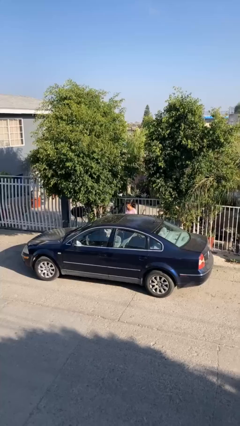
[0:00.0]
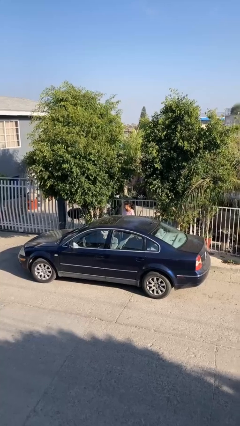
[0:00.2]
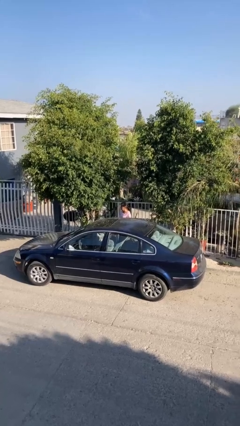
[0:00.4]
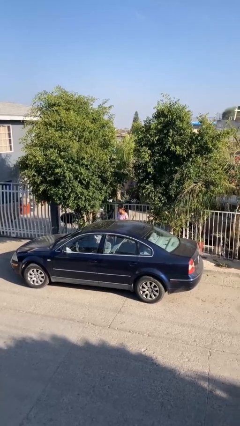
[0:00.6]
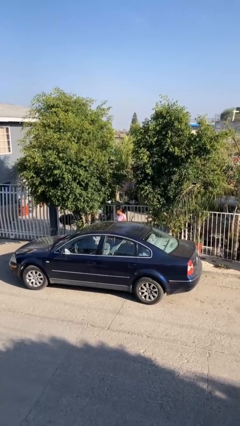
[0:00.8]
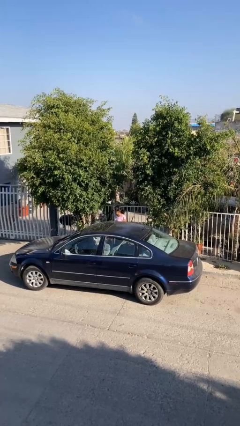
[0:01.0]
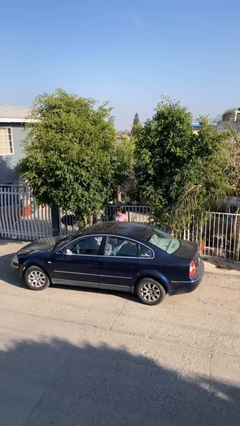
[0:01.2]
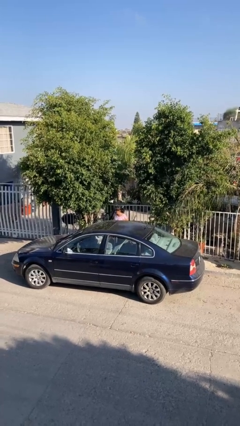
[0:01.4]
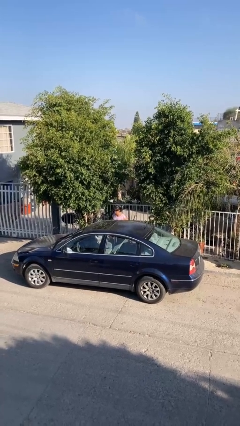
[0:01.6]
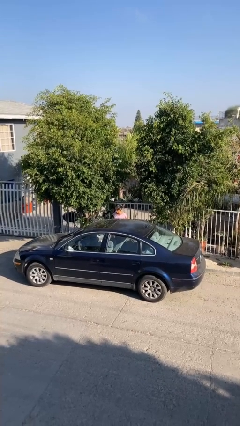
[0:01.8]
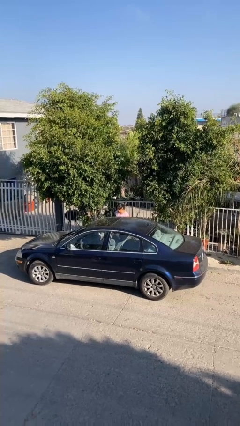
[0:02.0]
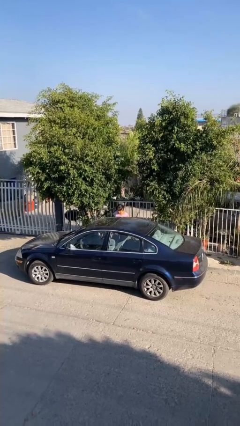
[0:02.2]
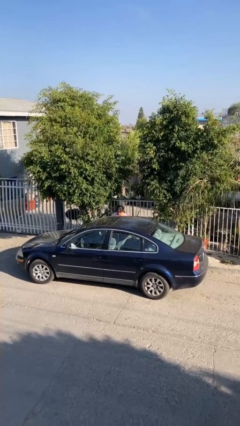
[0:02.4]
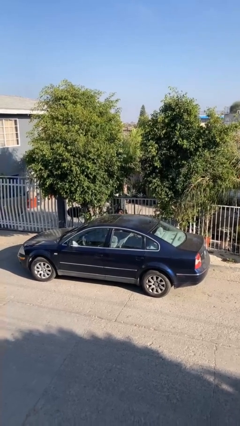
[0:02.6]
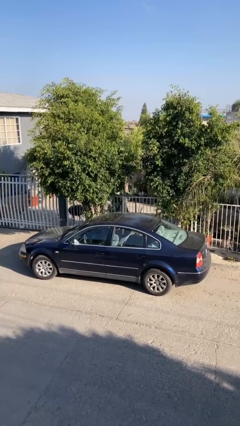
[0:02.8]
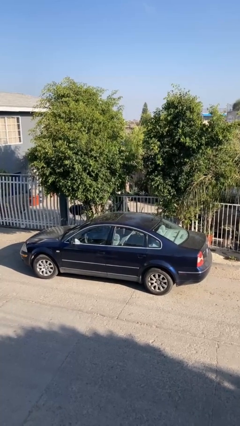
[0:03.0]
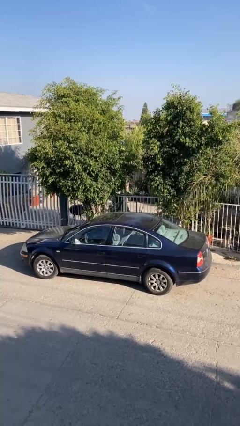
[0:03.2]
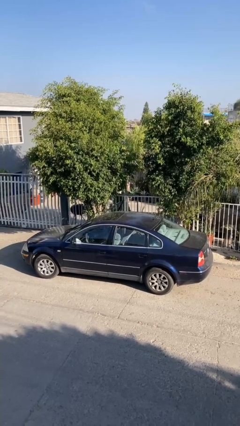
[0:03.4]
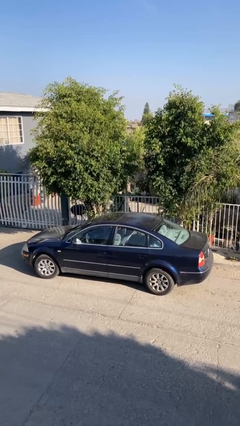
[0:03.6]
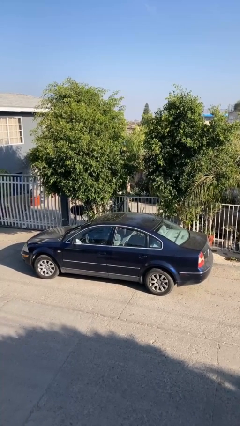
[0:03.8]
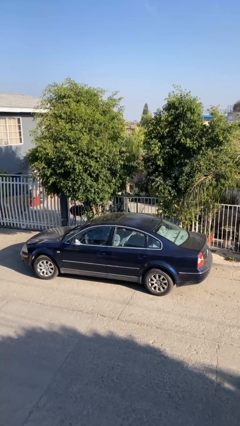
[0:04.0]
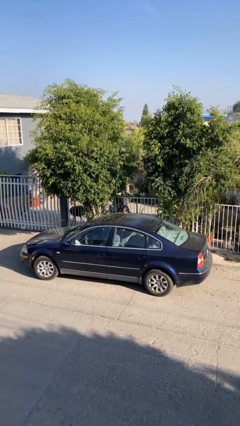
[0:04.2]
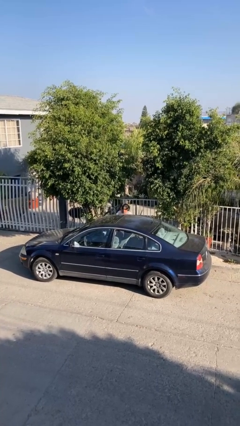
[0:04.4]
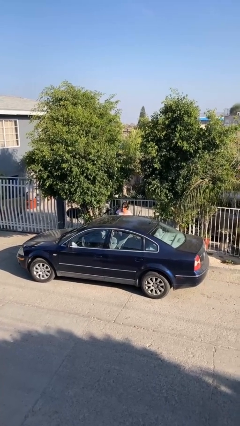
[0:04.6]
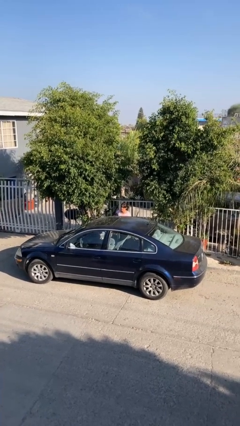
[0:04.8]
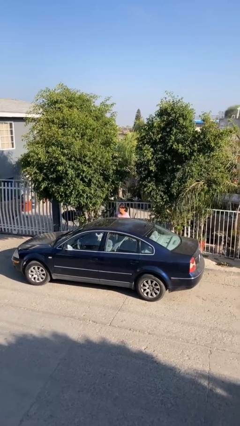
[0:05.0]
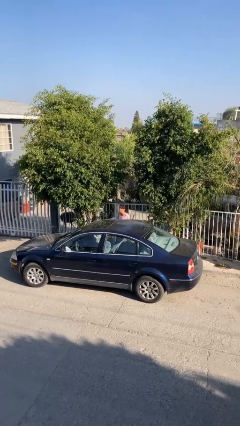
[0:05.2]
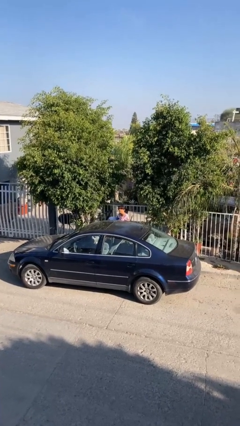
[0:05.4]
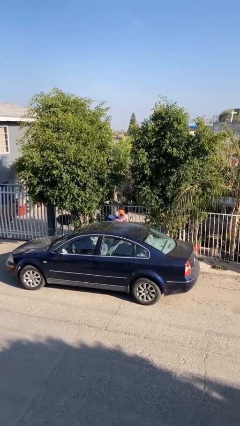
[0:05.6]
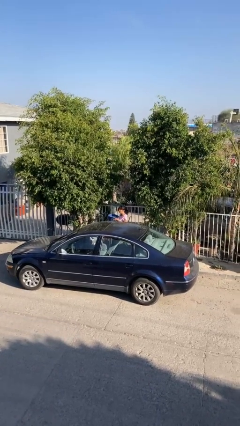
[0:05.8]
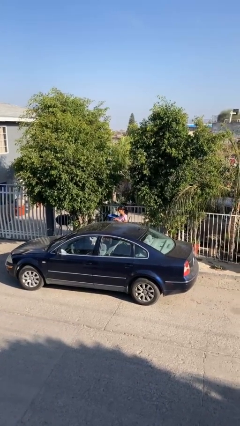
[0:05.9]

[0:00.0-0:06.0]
person unloads car

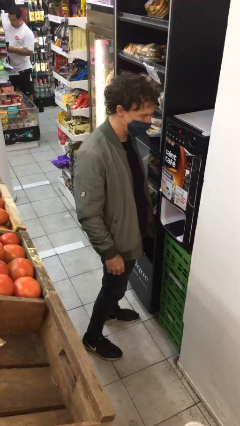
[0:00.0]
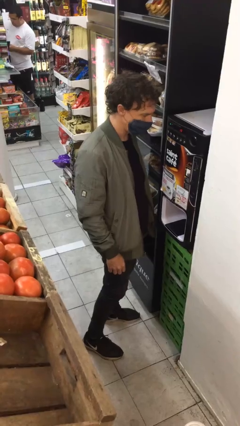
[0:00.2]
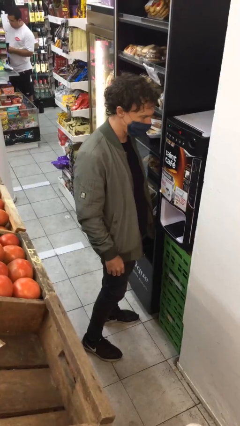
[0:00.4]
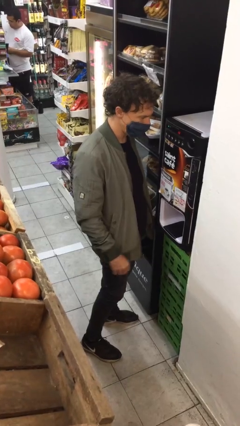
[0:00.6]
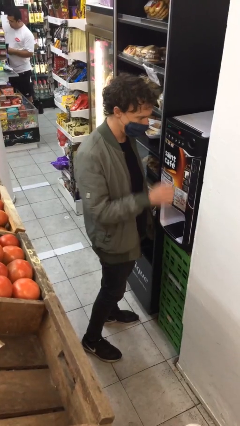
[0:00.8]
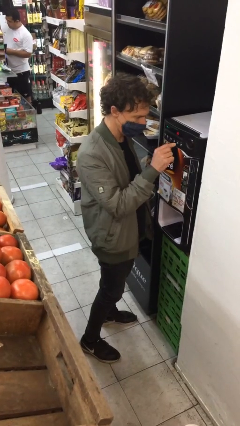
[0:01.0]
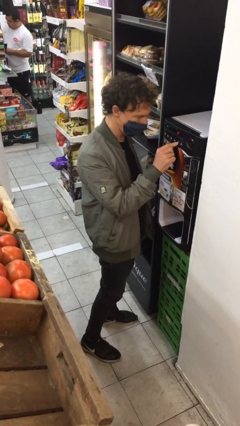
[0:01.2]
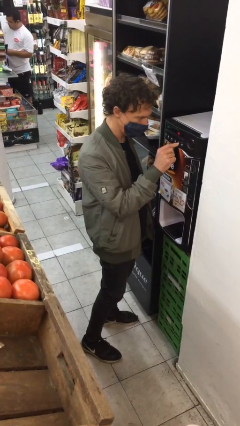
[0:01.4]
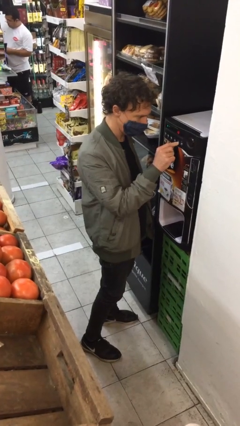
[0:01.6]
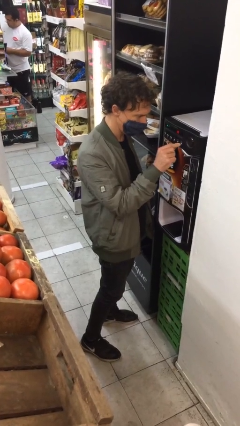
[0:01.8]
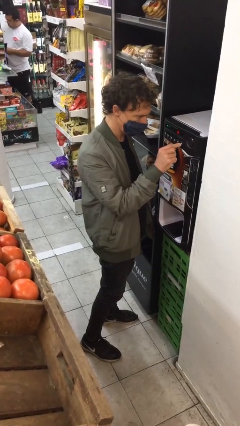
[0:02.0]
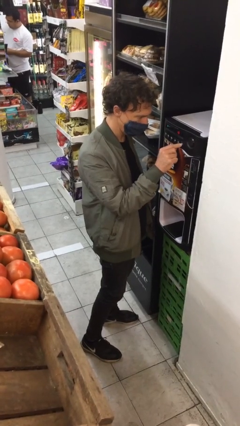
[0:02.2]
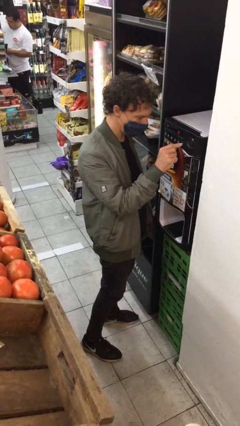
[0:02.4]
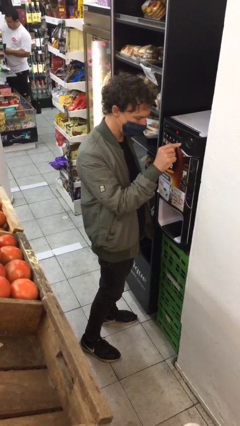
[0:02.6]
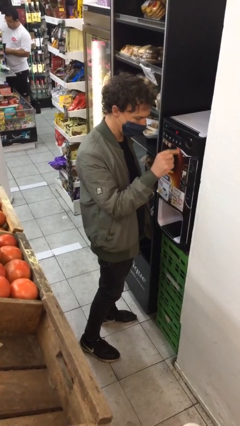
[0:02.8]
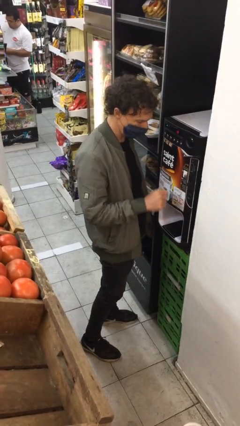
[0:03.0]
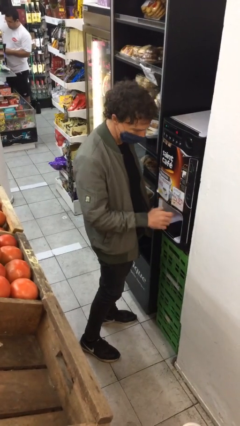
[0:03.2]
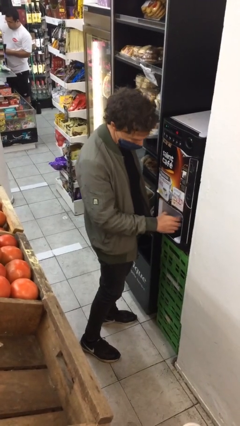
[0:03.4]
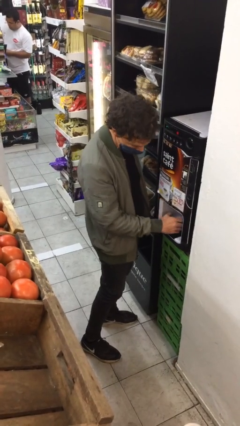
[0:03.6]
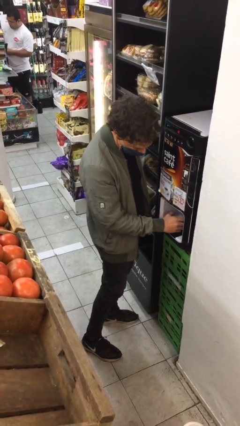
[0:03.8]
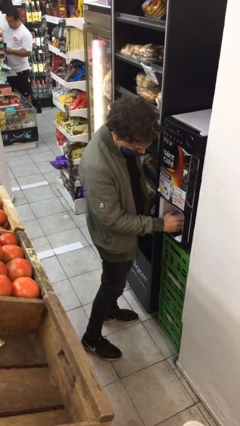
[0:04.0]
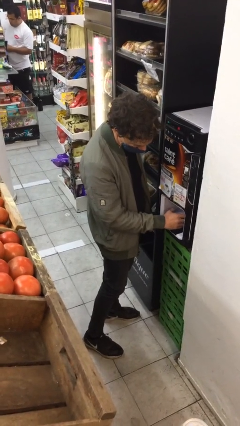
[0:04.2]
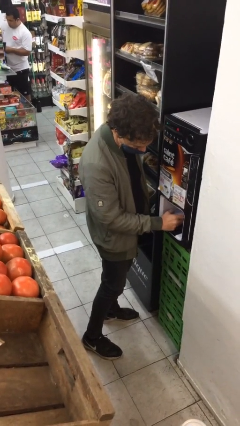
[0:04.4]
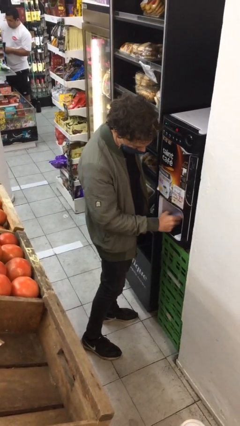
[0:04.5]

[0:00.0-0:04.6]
person purchases from machine

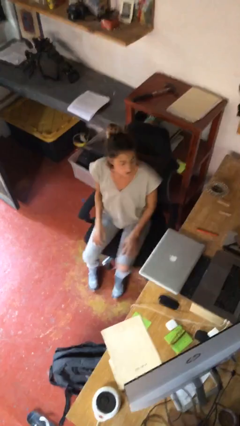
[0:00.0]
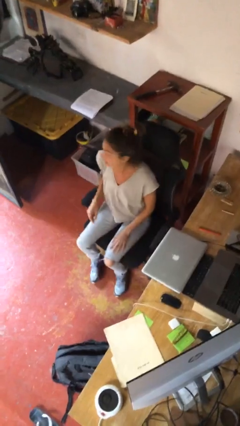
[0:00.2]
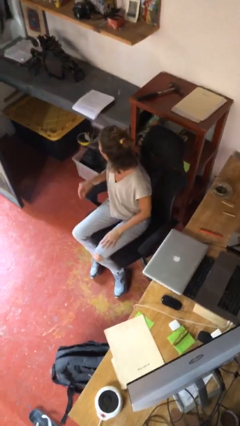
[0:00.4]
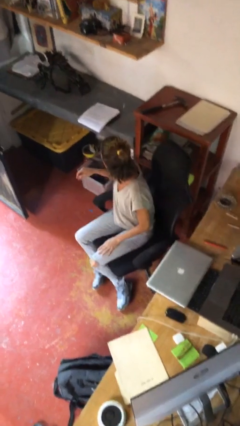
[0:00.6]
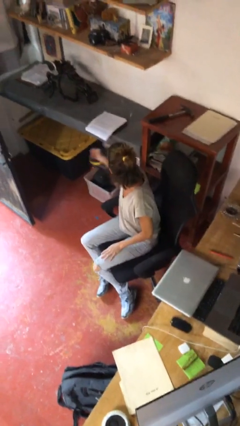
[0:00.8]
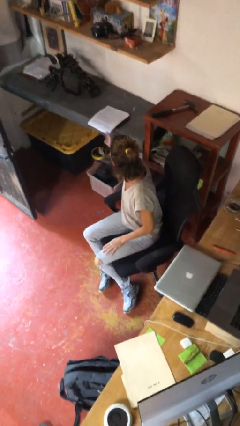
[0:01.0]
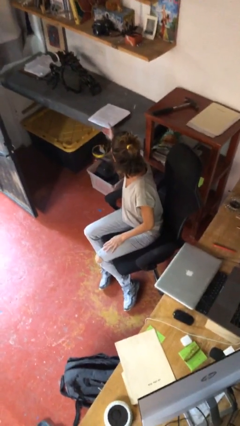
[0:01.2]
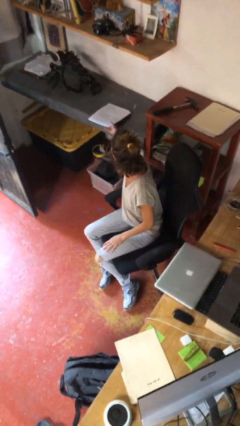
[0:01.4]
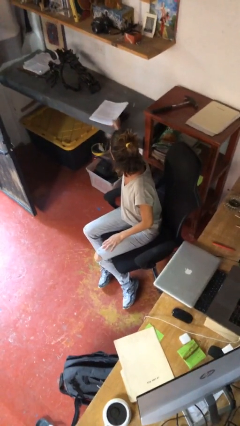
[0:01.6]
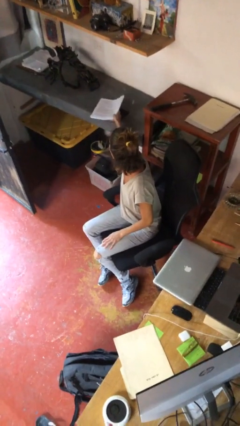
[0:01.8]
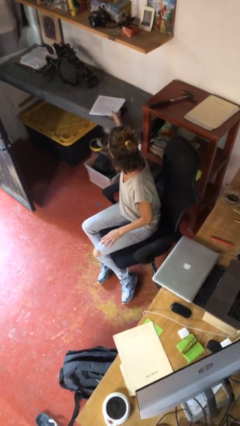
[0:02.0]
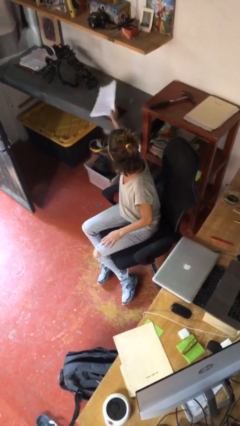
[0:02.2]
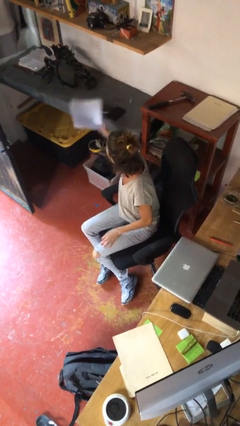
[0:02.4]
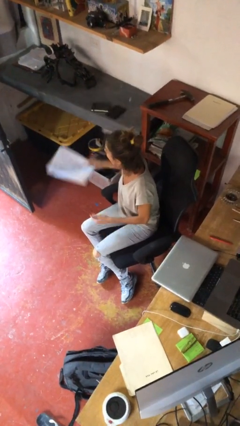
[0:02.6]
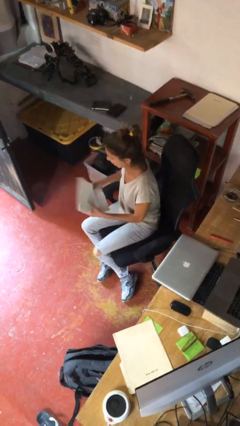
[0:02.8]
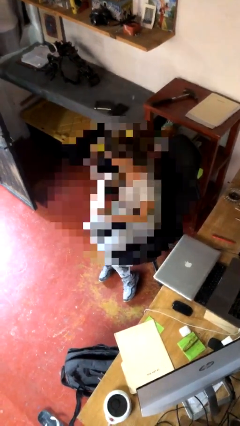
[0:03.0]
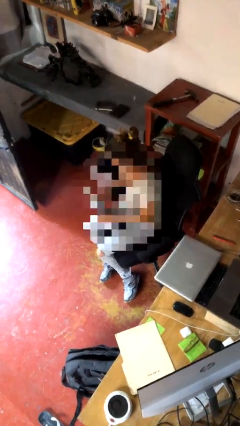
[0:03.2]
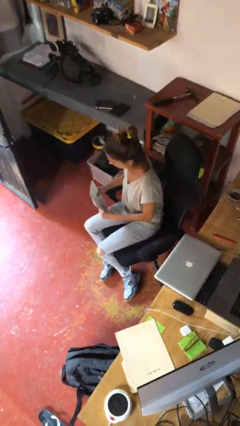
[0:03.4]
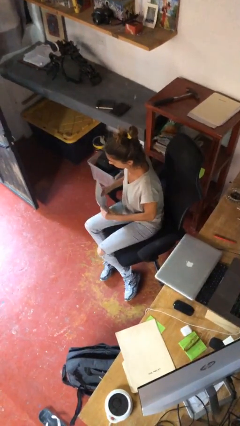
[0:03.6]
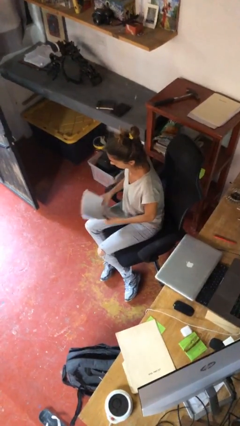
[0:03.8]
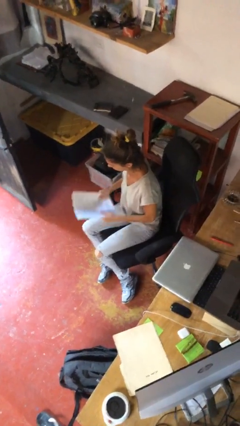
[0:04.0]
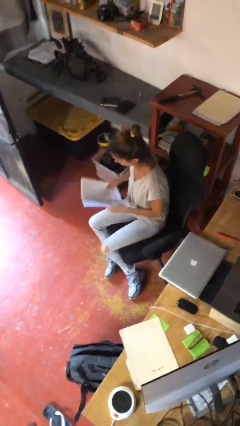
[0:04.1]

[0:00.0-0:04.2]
person picks up object from table

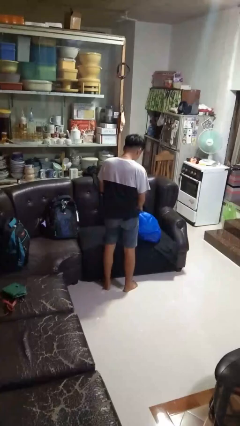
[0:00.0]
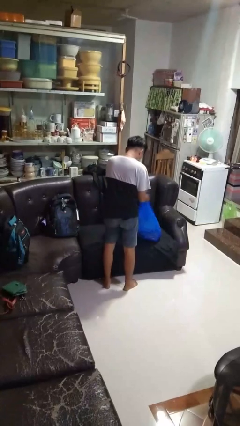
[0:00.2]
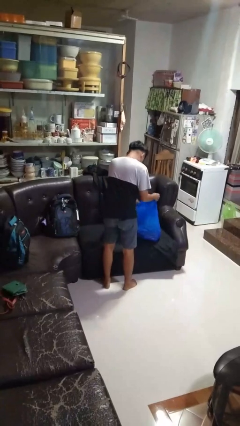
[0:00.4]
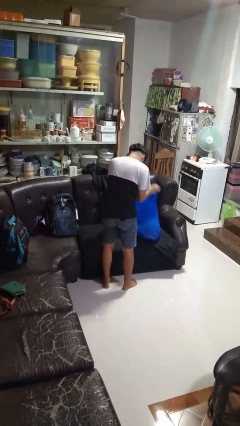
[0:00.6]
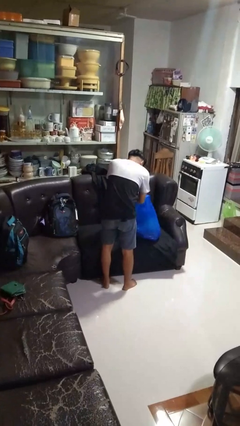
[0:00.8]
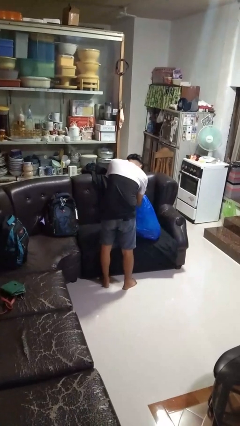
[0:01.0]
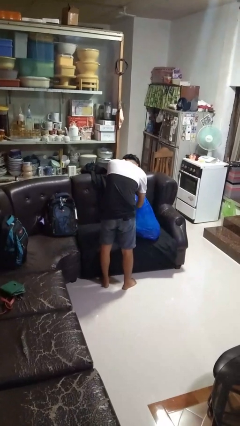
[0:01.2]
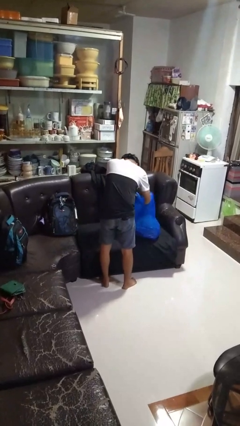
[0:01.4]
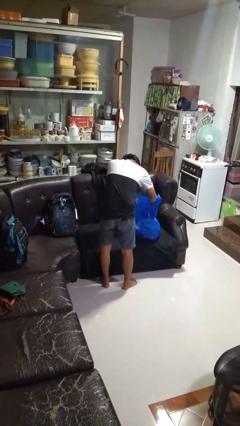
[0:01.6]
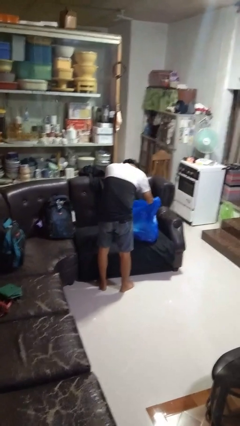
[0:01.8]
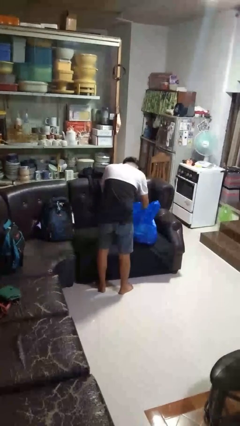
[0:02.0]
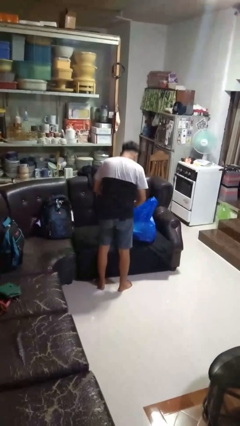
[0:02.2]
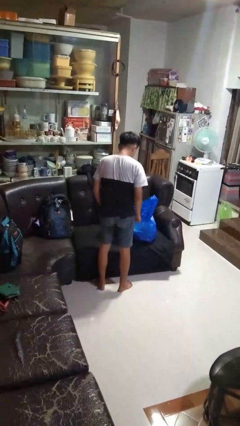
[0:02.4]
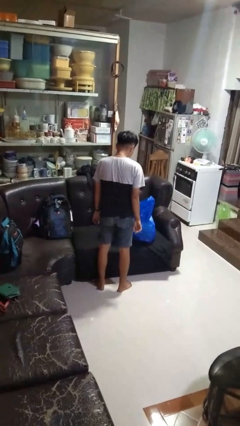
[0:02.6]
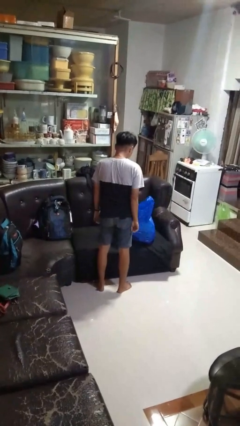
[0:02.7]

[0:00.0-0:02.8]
person searches in bag
